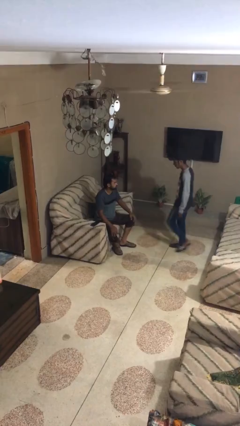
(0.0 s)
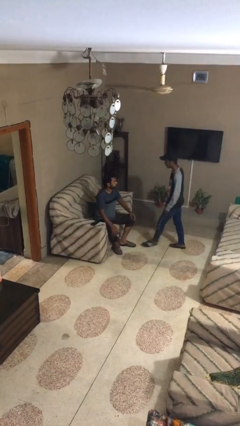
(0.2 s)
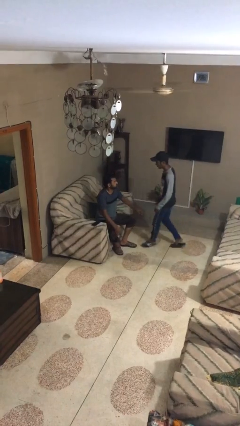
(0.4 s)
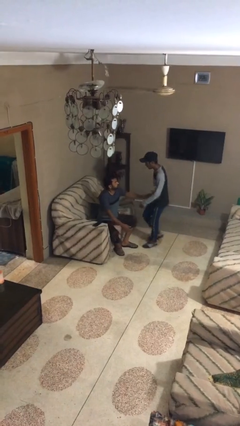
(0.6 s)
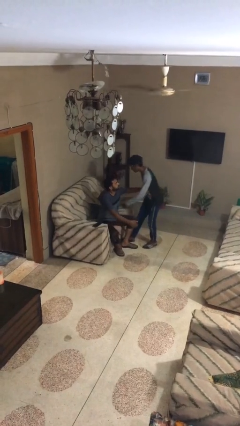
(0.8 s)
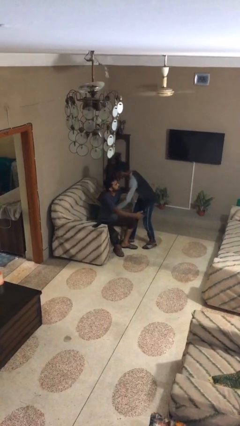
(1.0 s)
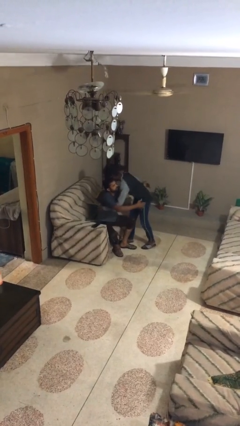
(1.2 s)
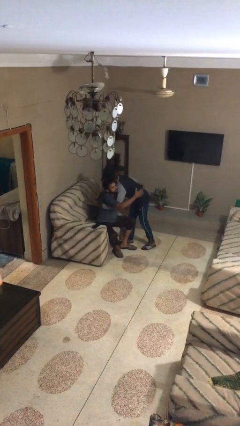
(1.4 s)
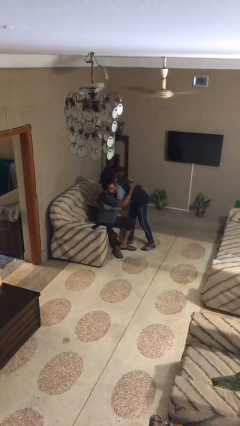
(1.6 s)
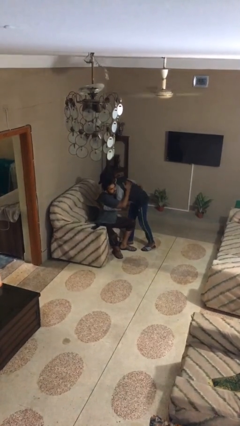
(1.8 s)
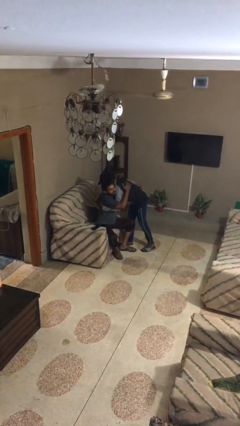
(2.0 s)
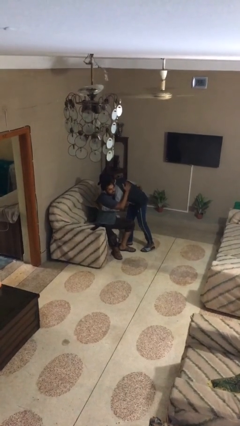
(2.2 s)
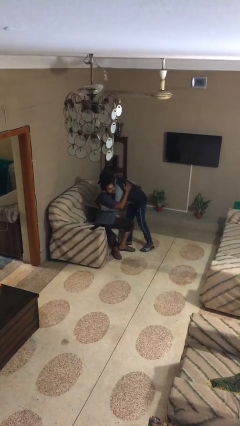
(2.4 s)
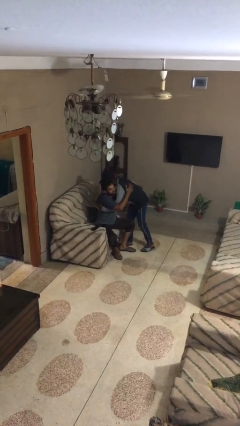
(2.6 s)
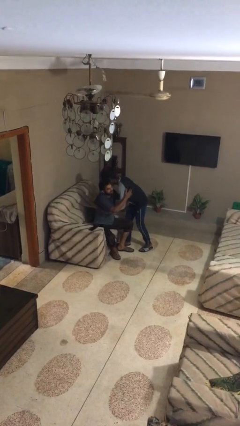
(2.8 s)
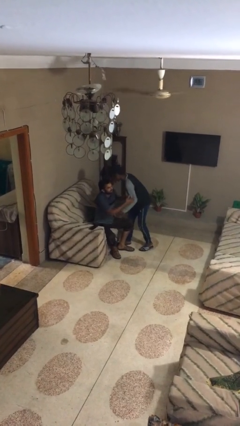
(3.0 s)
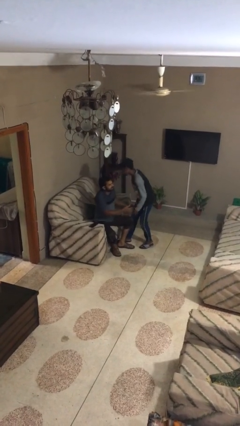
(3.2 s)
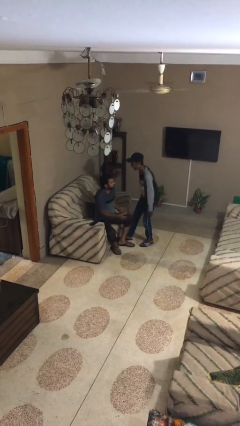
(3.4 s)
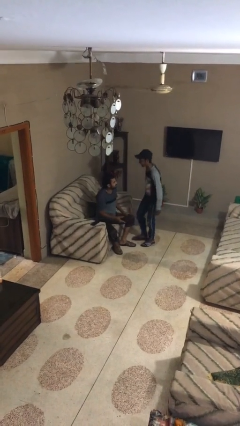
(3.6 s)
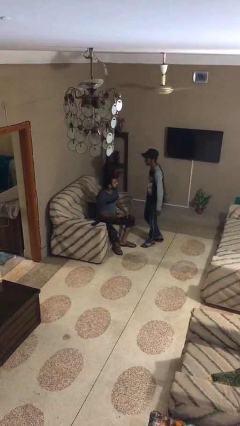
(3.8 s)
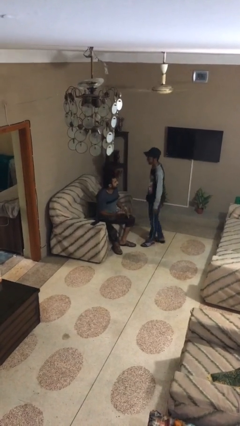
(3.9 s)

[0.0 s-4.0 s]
person embraces person

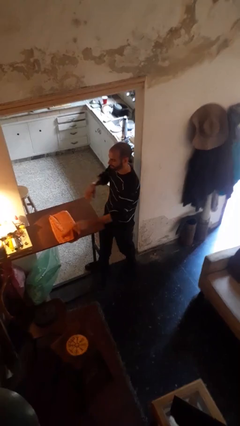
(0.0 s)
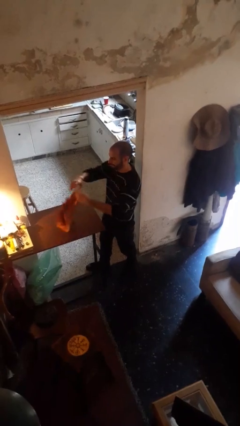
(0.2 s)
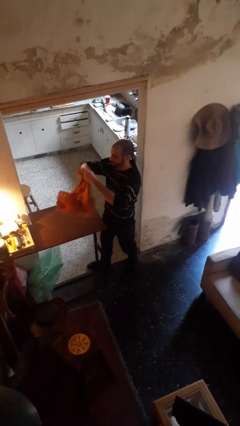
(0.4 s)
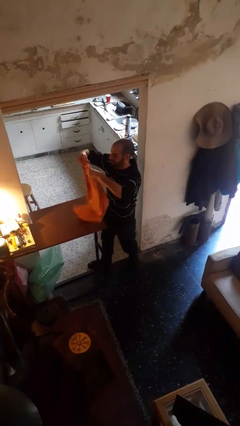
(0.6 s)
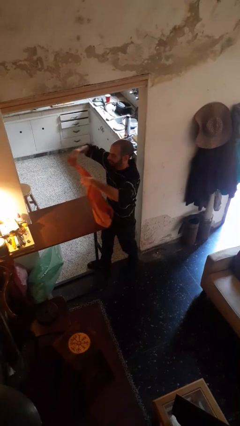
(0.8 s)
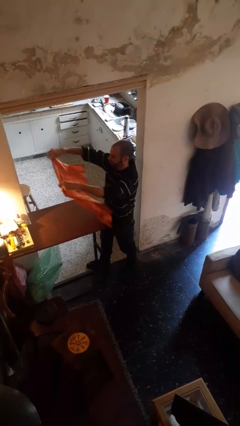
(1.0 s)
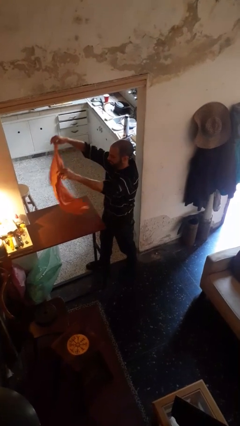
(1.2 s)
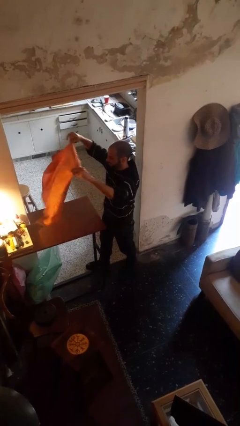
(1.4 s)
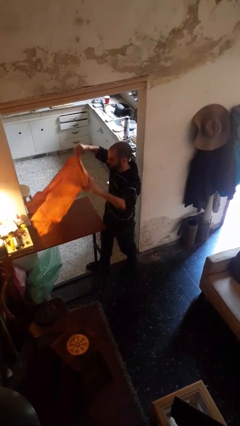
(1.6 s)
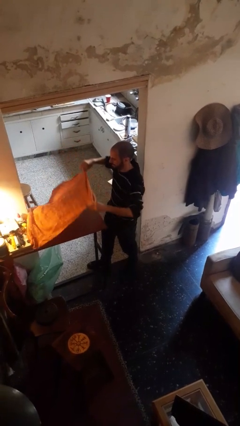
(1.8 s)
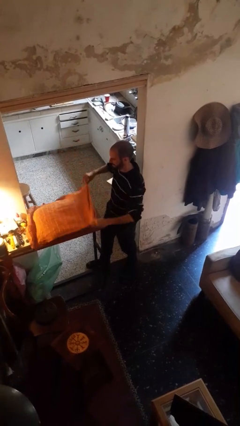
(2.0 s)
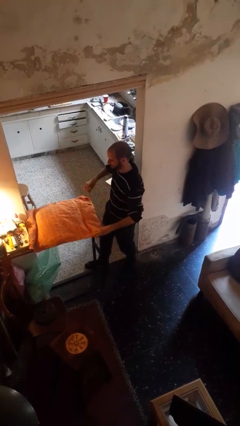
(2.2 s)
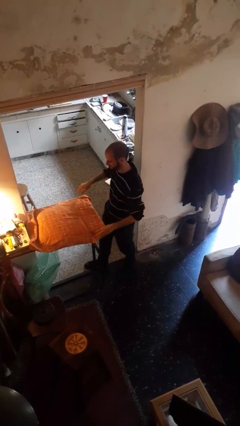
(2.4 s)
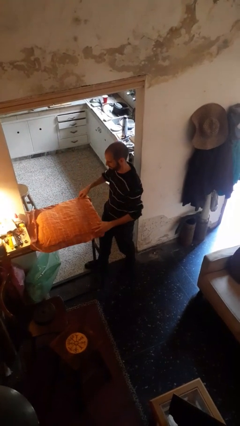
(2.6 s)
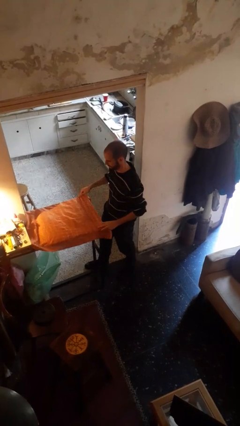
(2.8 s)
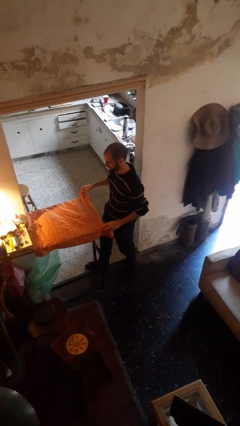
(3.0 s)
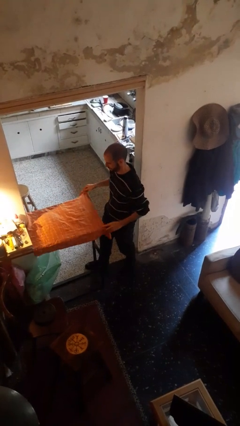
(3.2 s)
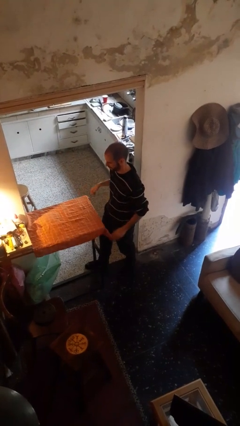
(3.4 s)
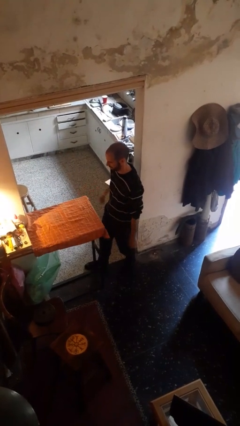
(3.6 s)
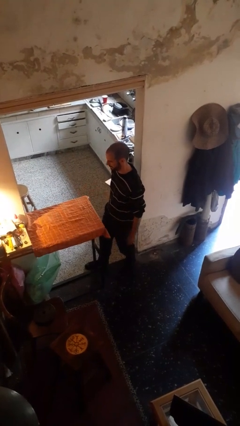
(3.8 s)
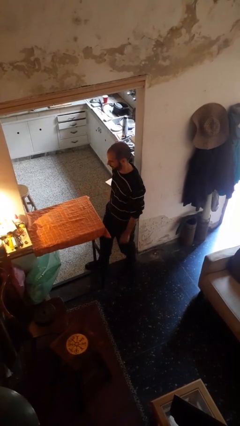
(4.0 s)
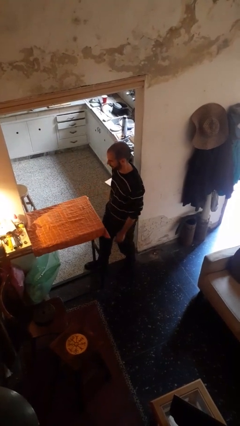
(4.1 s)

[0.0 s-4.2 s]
person spreads tablecloth

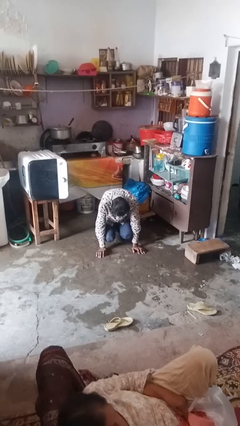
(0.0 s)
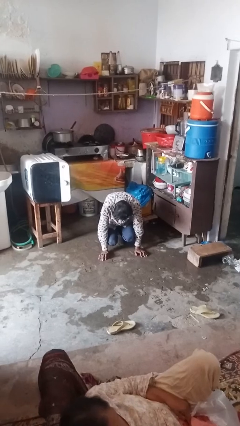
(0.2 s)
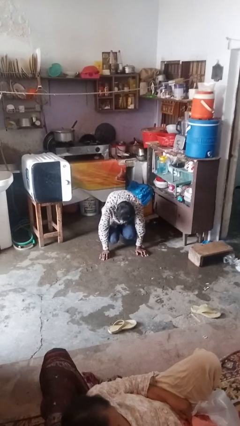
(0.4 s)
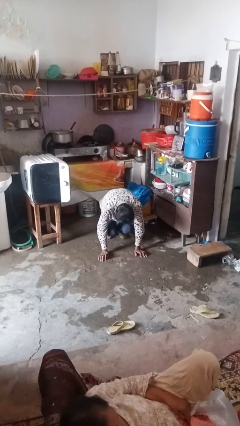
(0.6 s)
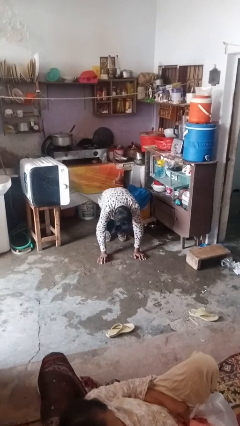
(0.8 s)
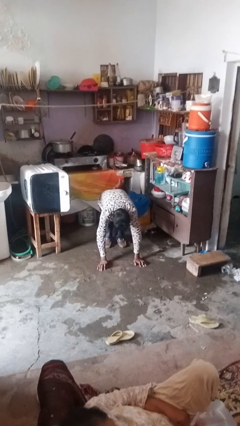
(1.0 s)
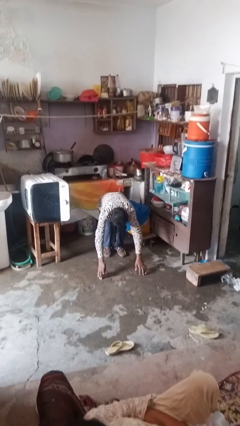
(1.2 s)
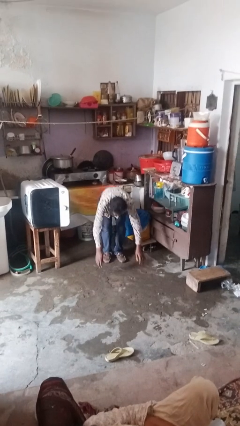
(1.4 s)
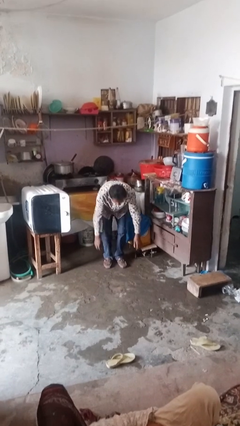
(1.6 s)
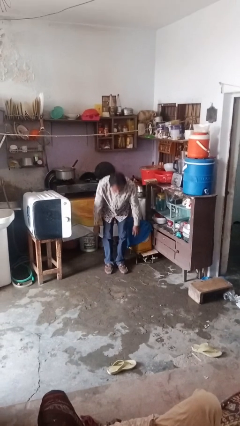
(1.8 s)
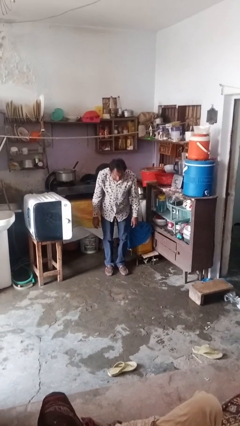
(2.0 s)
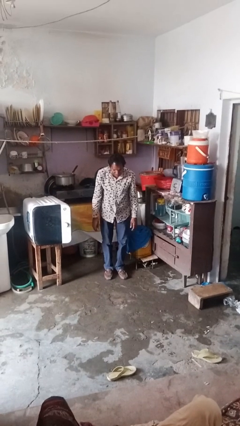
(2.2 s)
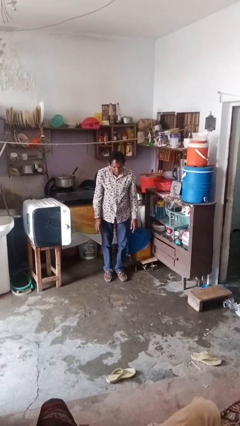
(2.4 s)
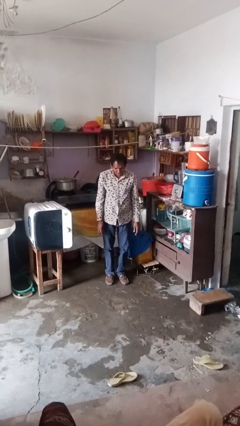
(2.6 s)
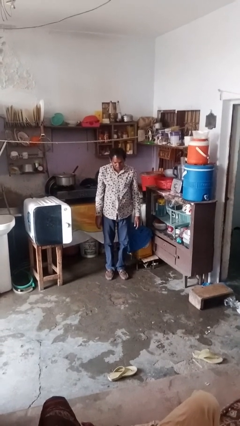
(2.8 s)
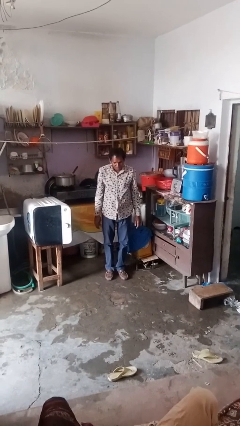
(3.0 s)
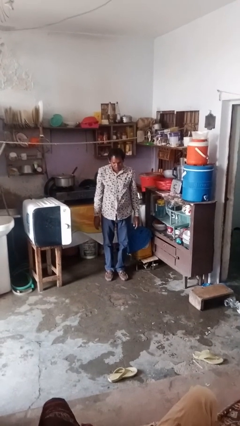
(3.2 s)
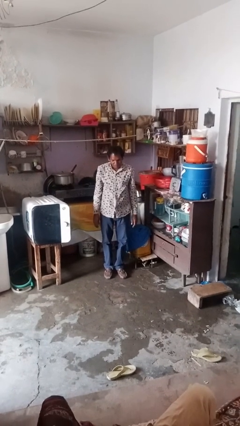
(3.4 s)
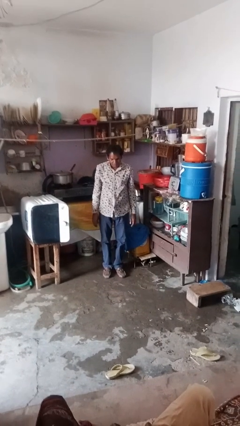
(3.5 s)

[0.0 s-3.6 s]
person stands up from floor

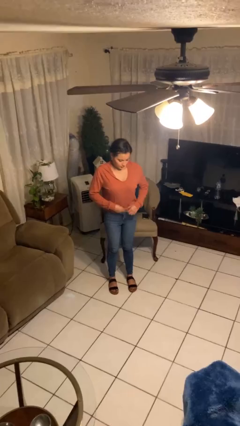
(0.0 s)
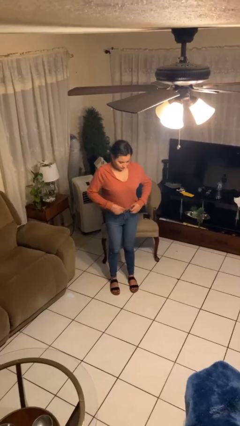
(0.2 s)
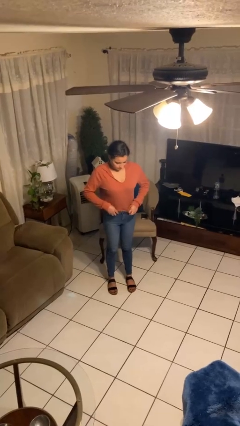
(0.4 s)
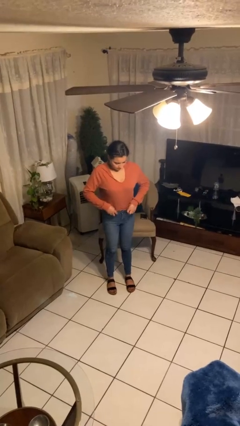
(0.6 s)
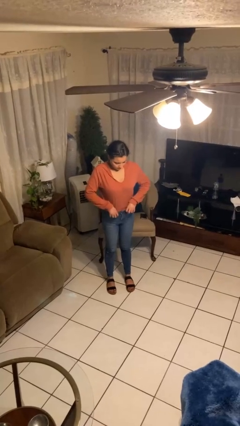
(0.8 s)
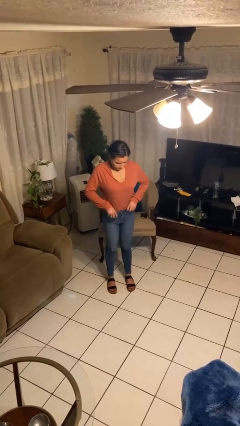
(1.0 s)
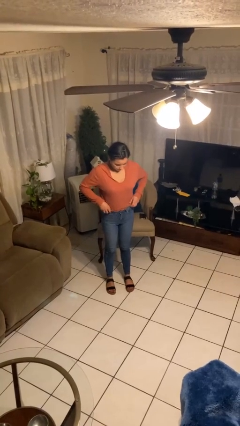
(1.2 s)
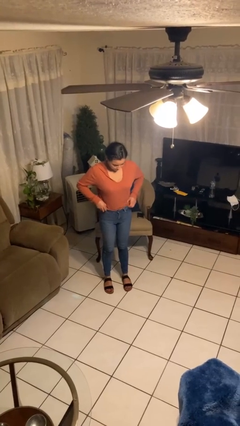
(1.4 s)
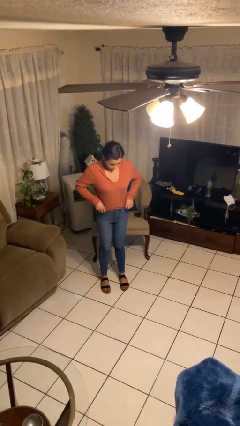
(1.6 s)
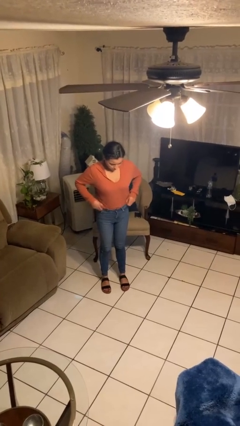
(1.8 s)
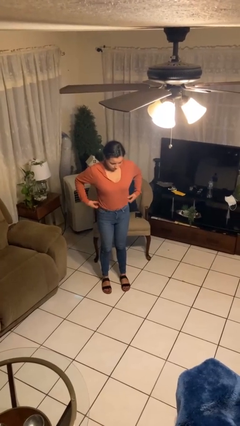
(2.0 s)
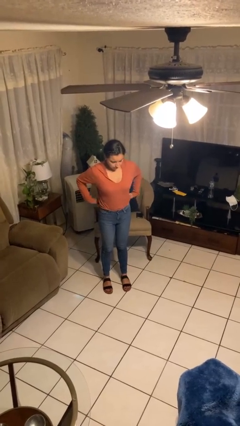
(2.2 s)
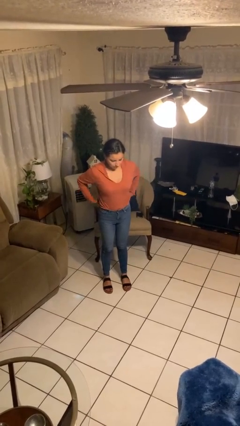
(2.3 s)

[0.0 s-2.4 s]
person tucks in shirt

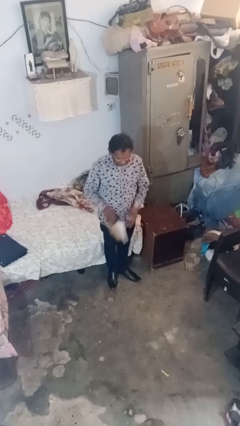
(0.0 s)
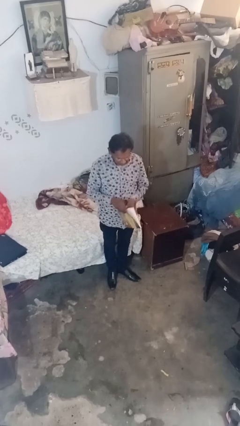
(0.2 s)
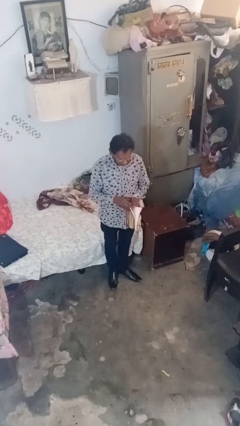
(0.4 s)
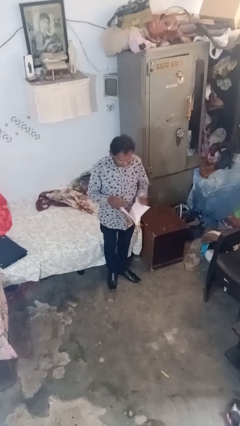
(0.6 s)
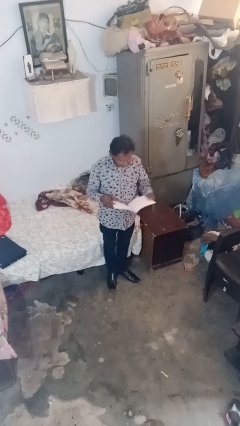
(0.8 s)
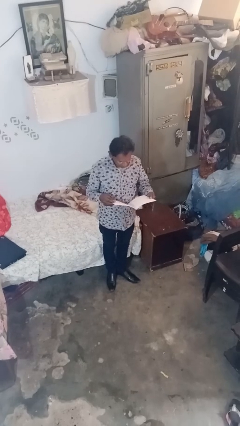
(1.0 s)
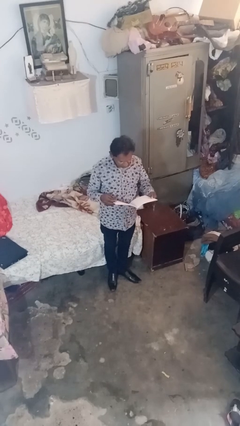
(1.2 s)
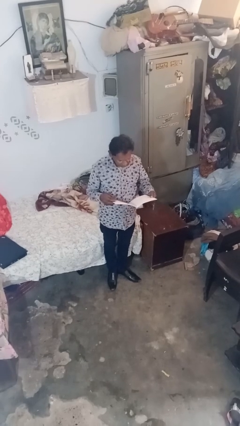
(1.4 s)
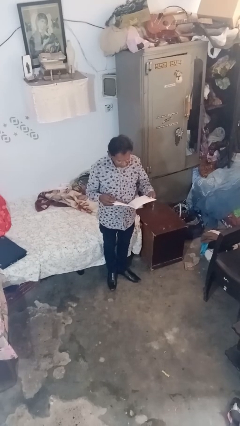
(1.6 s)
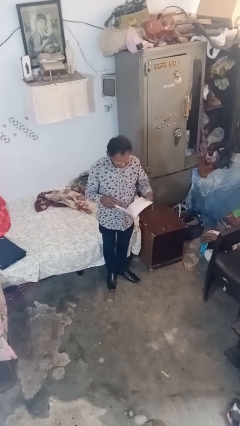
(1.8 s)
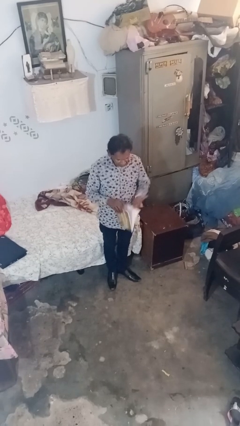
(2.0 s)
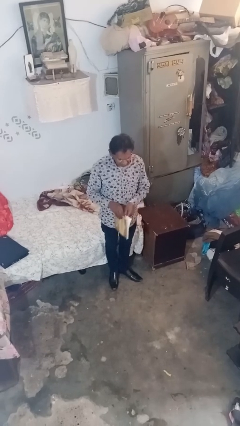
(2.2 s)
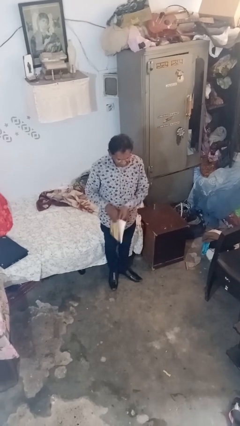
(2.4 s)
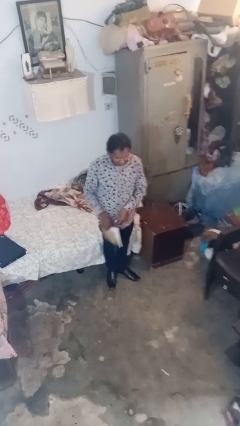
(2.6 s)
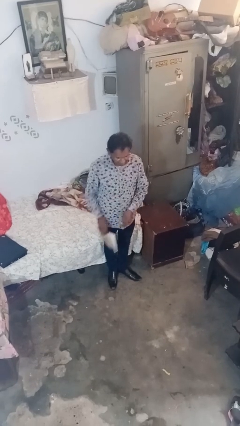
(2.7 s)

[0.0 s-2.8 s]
person reads document

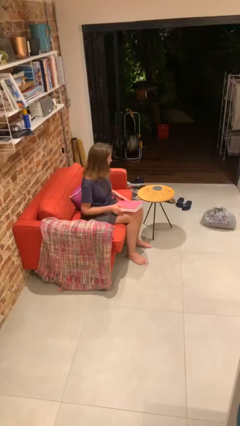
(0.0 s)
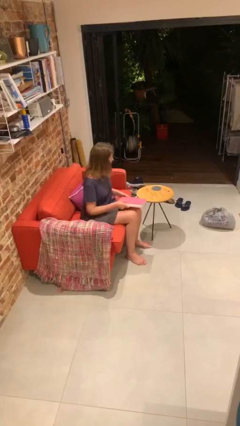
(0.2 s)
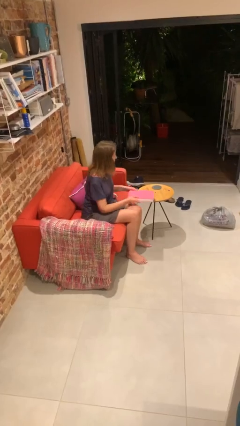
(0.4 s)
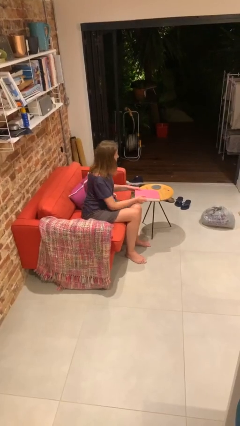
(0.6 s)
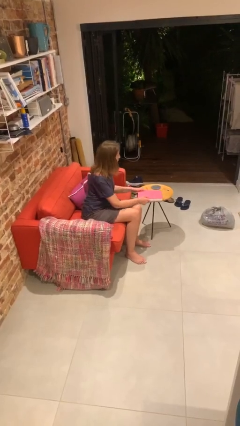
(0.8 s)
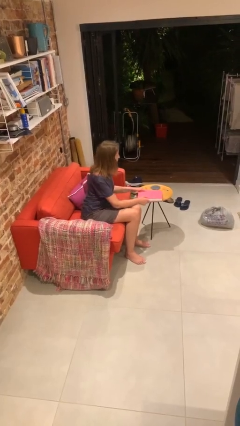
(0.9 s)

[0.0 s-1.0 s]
person puts down object on table
